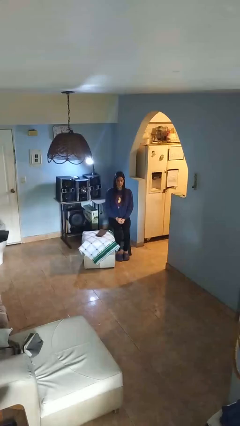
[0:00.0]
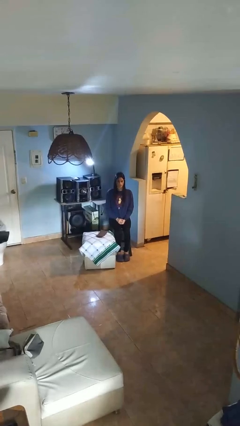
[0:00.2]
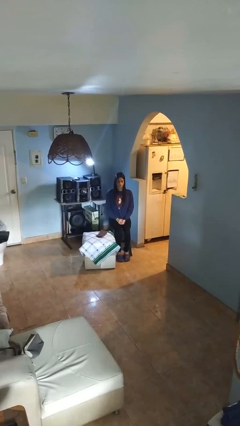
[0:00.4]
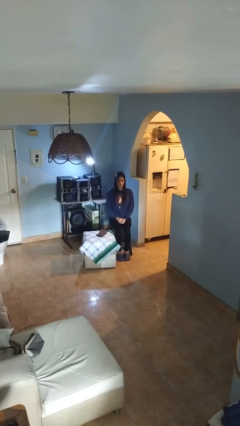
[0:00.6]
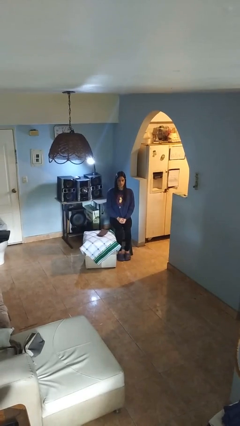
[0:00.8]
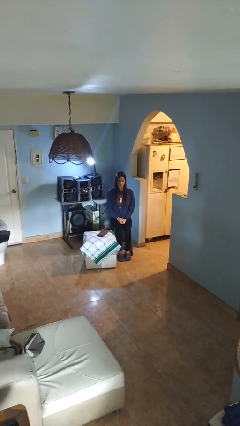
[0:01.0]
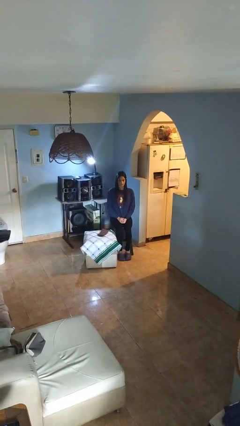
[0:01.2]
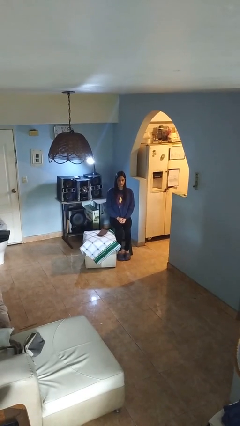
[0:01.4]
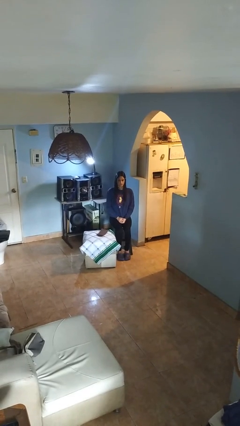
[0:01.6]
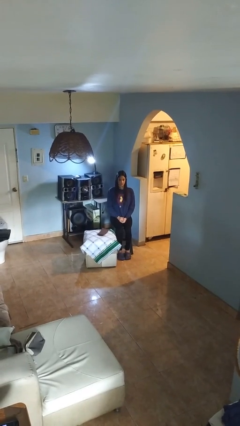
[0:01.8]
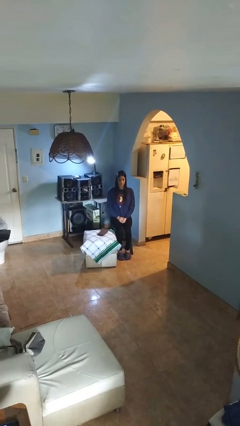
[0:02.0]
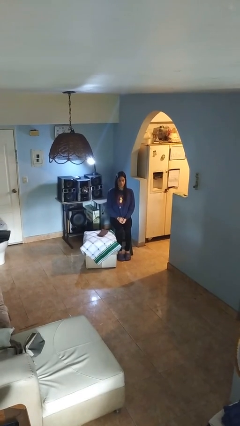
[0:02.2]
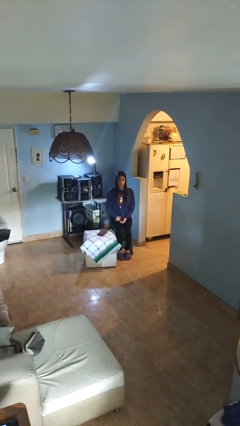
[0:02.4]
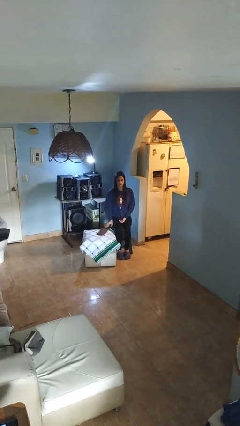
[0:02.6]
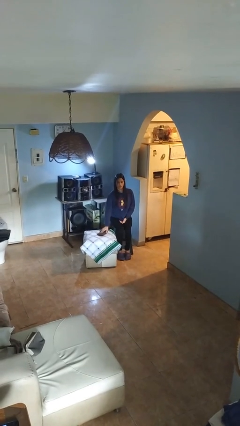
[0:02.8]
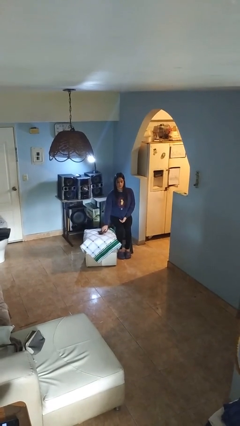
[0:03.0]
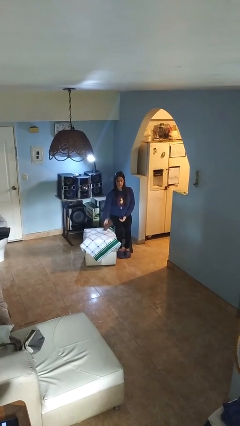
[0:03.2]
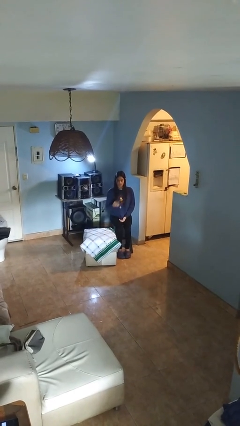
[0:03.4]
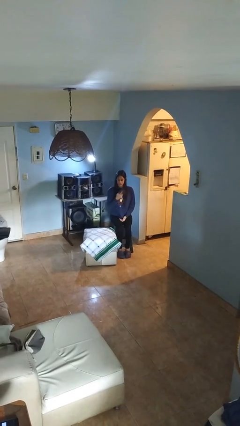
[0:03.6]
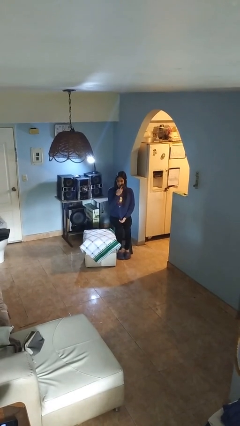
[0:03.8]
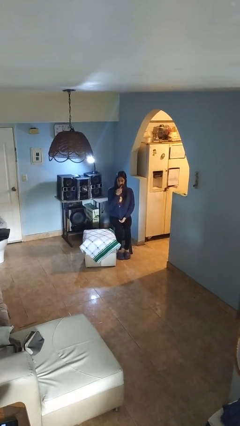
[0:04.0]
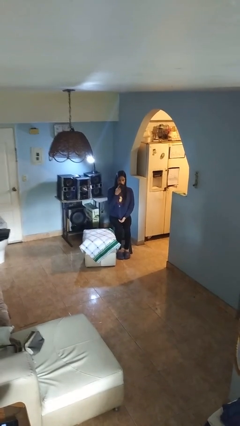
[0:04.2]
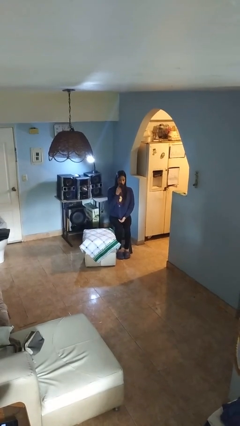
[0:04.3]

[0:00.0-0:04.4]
person wipes mouth with napkin

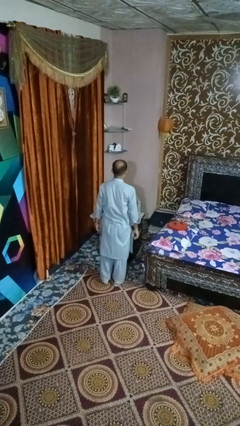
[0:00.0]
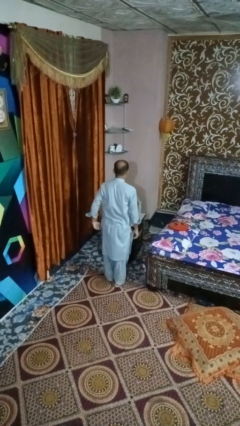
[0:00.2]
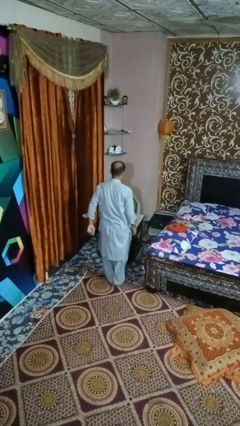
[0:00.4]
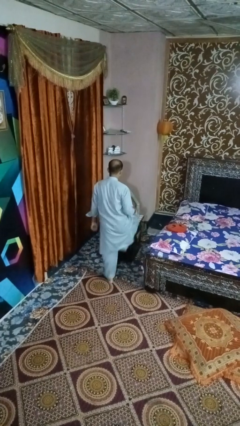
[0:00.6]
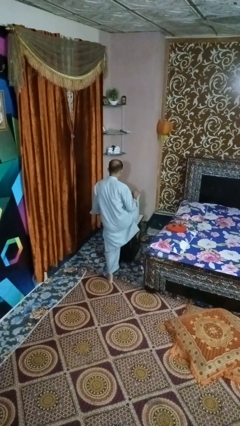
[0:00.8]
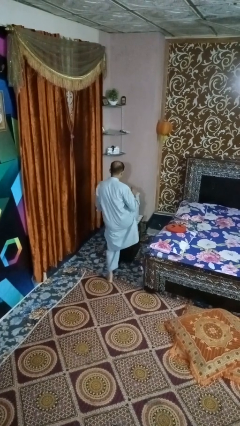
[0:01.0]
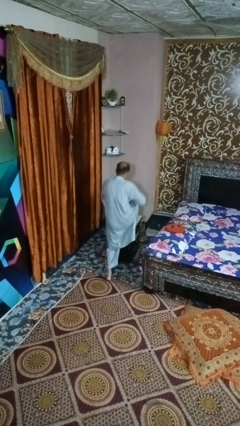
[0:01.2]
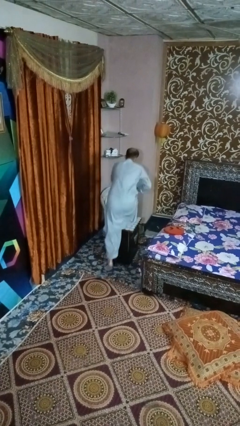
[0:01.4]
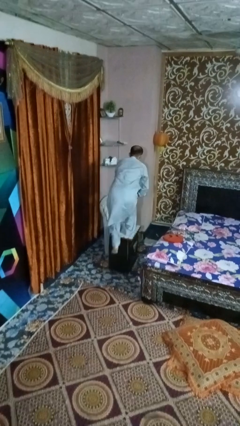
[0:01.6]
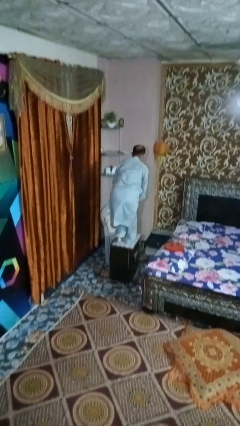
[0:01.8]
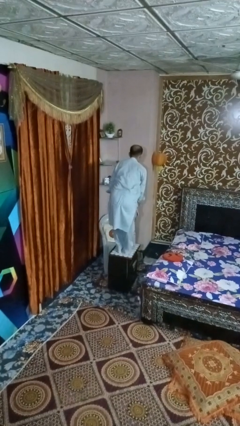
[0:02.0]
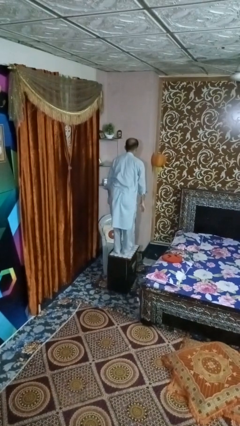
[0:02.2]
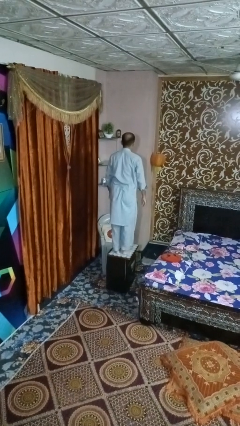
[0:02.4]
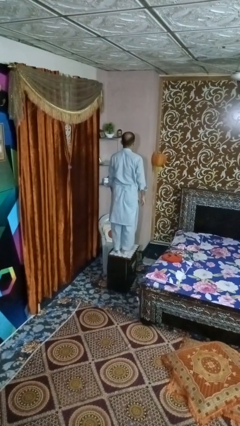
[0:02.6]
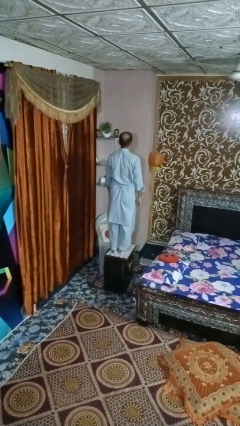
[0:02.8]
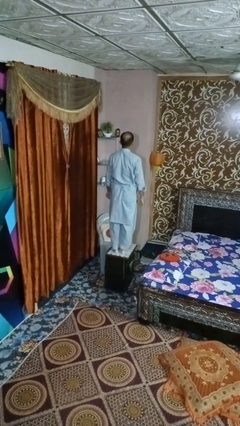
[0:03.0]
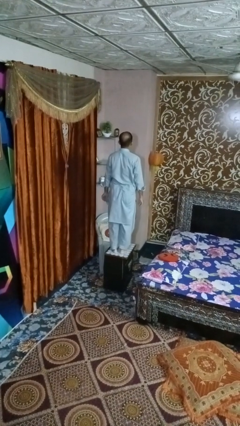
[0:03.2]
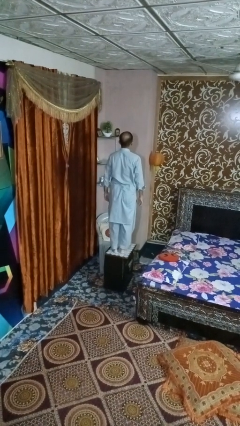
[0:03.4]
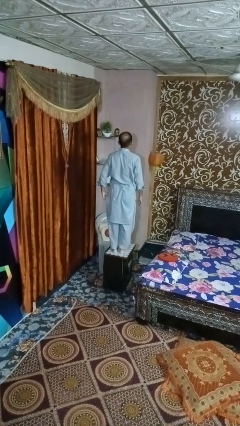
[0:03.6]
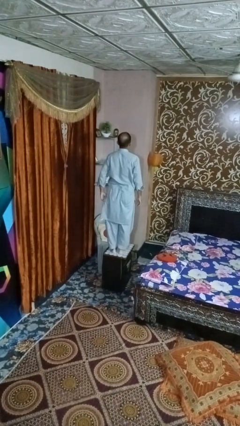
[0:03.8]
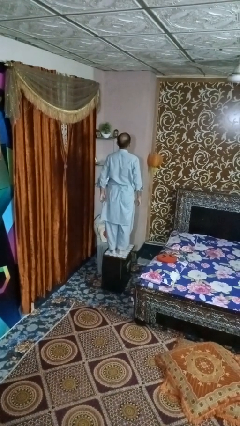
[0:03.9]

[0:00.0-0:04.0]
person climbs on table

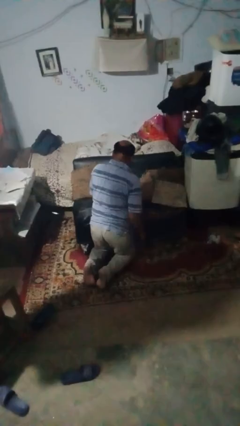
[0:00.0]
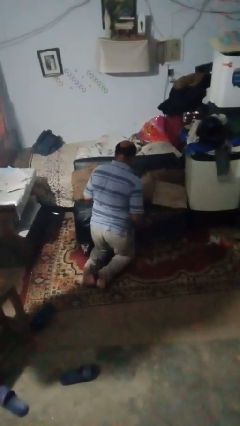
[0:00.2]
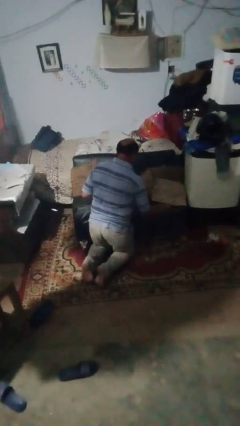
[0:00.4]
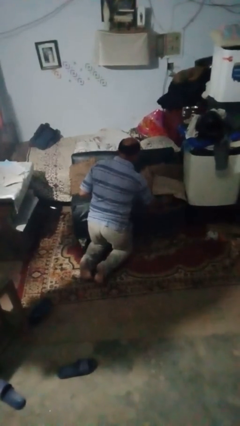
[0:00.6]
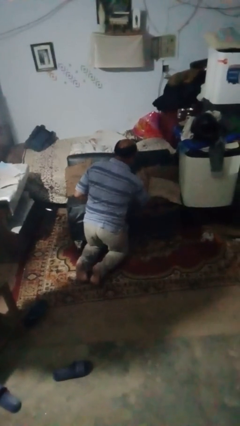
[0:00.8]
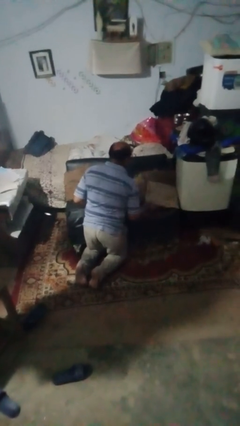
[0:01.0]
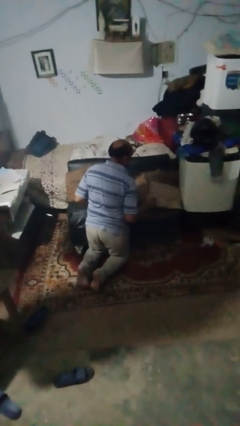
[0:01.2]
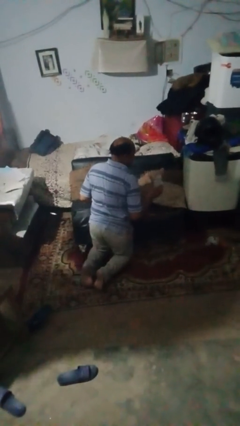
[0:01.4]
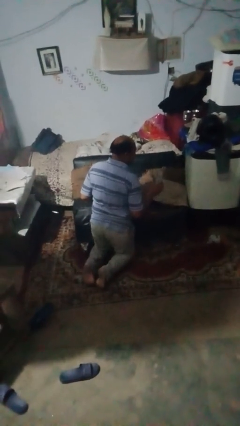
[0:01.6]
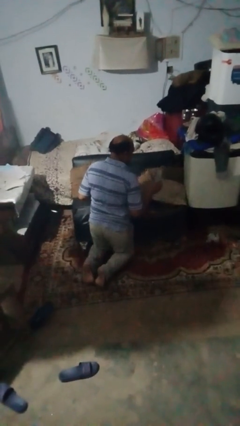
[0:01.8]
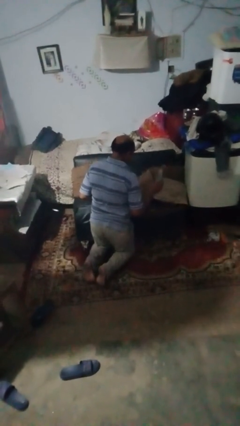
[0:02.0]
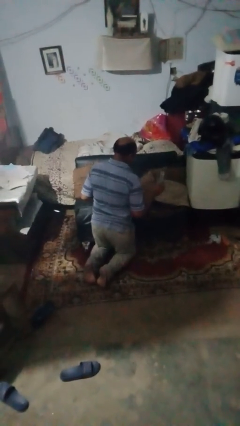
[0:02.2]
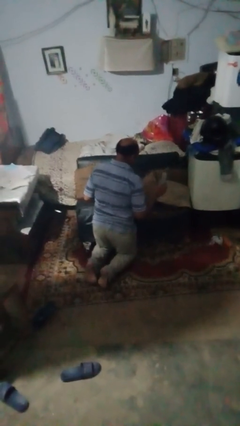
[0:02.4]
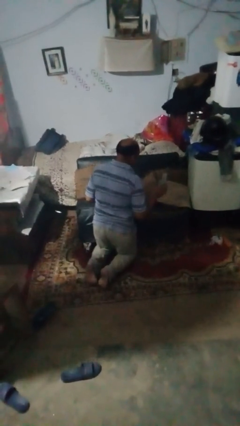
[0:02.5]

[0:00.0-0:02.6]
person searches in couch

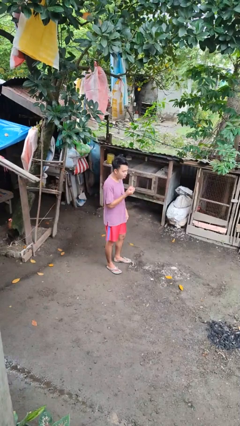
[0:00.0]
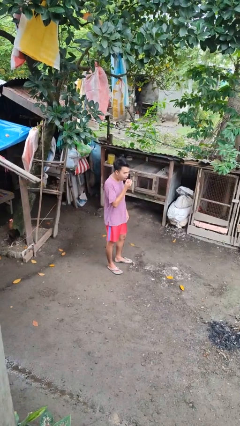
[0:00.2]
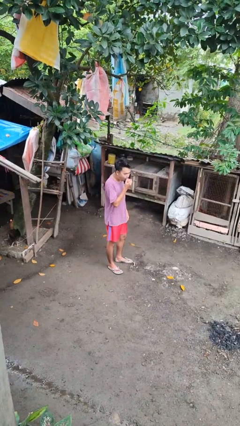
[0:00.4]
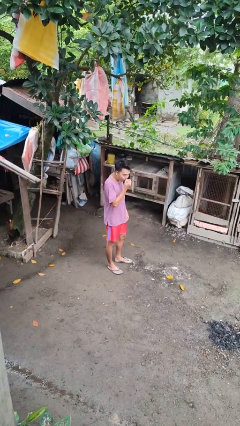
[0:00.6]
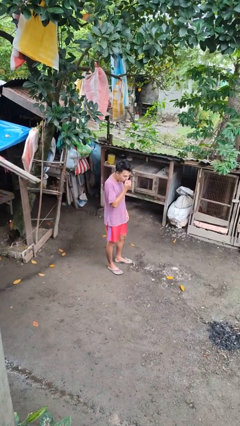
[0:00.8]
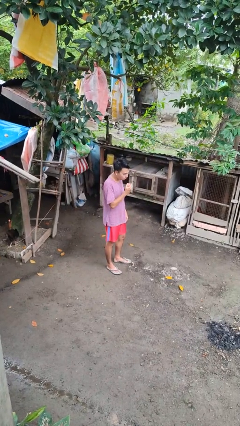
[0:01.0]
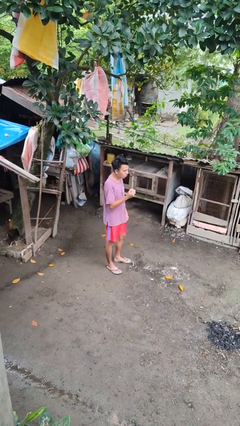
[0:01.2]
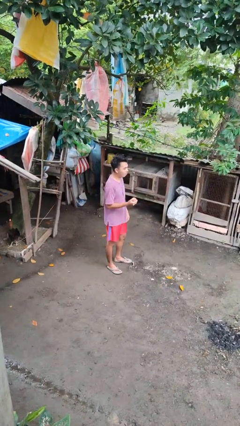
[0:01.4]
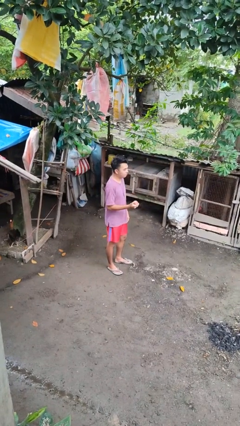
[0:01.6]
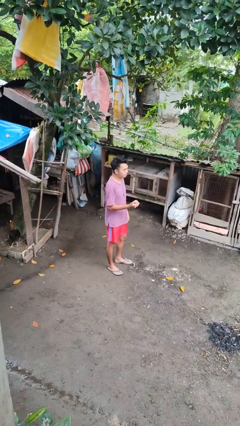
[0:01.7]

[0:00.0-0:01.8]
person eats apple

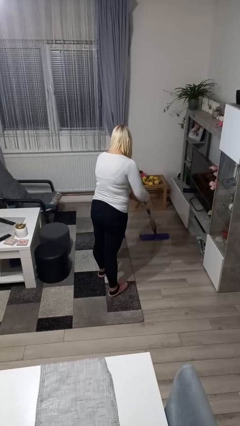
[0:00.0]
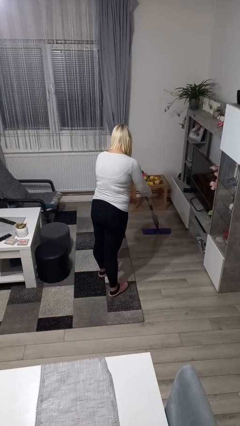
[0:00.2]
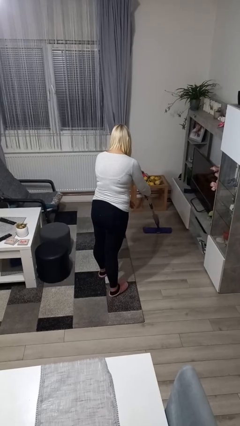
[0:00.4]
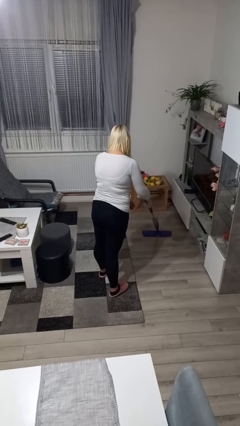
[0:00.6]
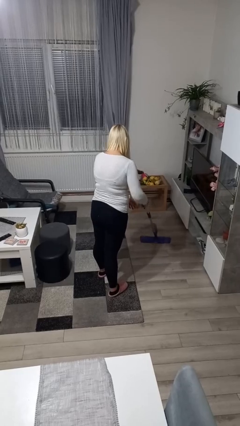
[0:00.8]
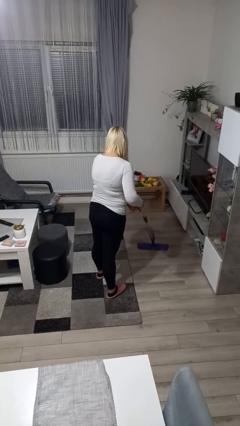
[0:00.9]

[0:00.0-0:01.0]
person mops

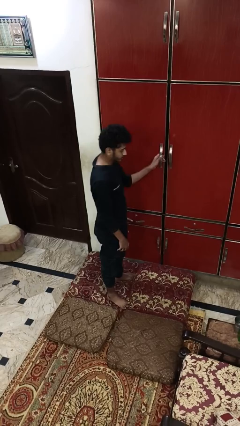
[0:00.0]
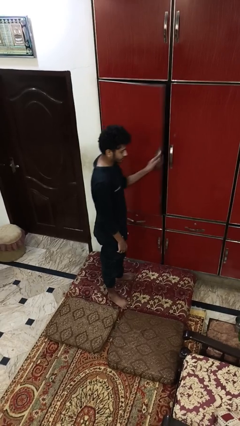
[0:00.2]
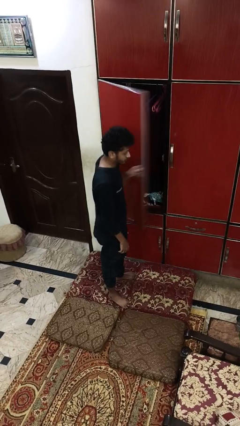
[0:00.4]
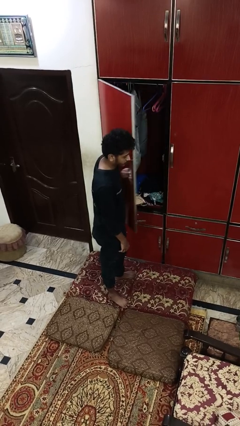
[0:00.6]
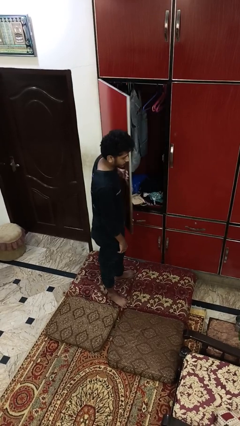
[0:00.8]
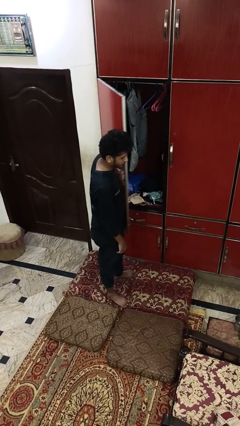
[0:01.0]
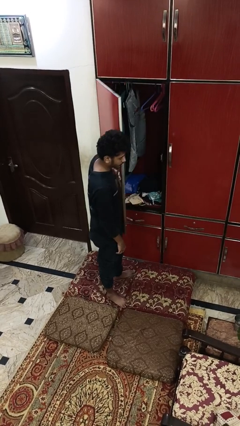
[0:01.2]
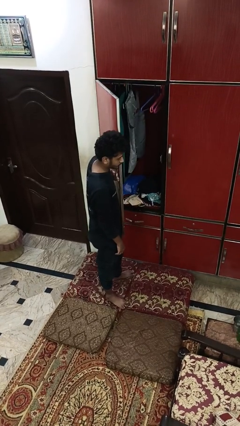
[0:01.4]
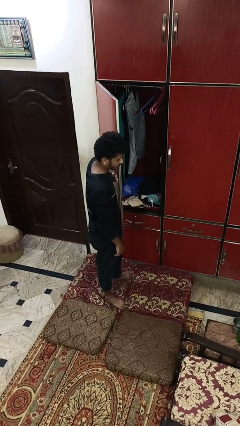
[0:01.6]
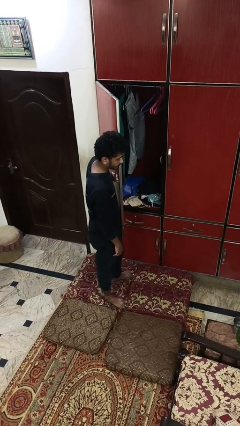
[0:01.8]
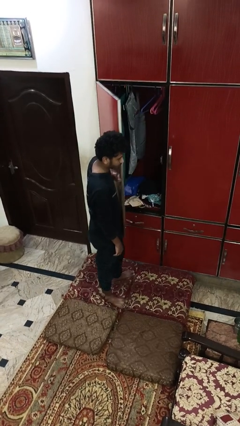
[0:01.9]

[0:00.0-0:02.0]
person opens closet door

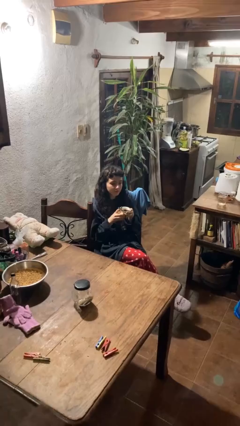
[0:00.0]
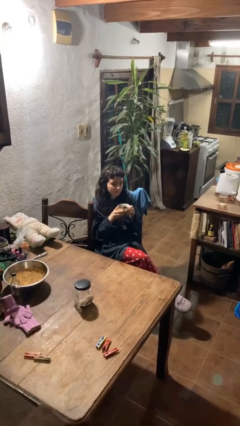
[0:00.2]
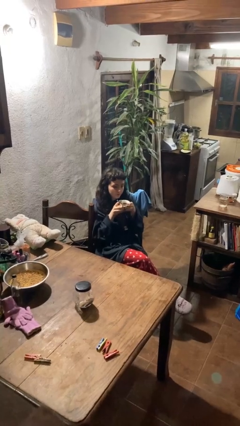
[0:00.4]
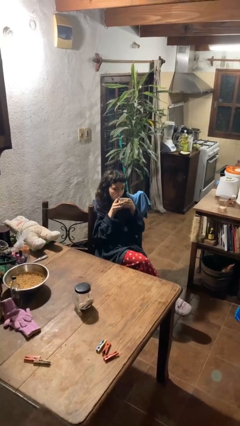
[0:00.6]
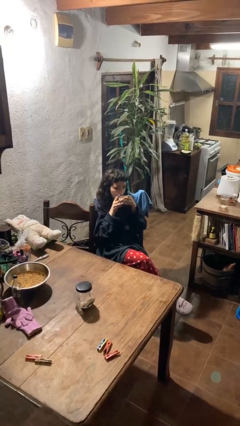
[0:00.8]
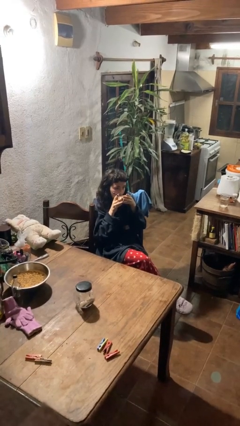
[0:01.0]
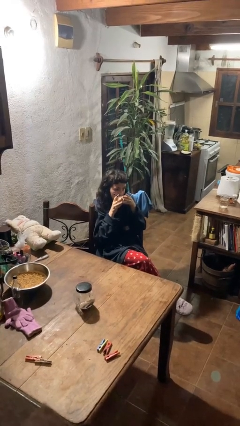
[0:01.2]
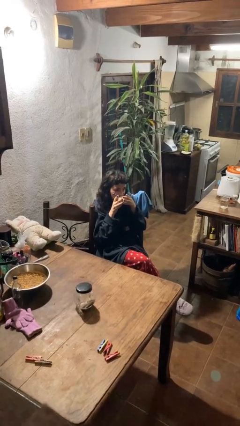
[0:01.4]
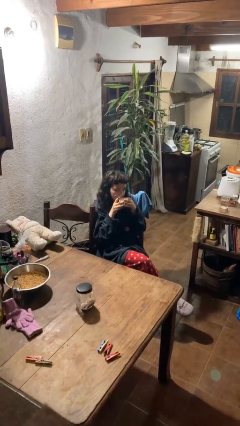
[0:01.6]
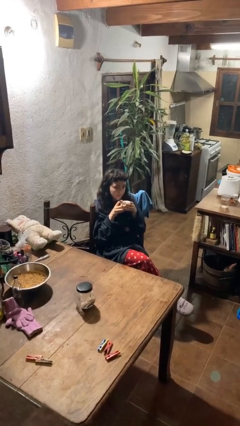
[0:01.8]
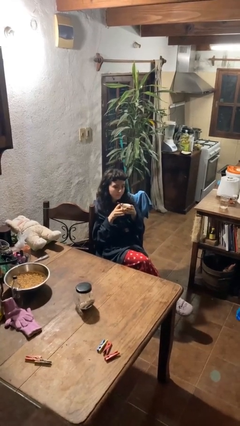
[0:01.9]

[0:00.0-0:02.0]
person drinks from mug
